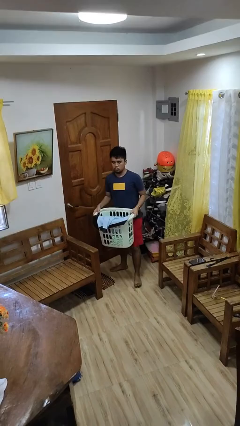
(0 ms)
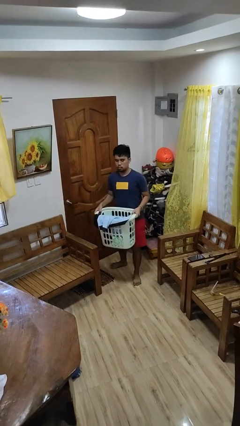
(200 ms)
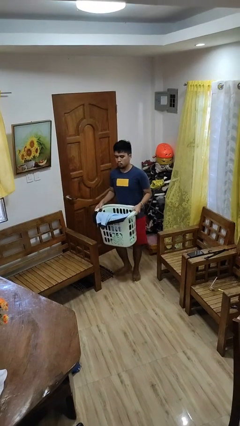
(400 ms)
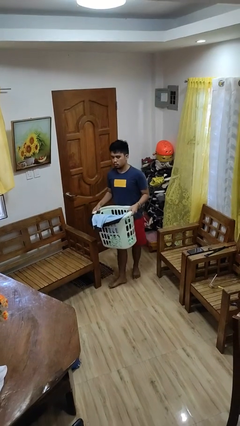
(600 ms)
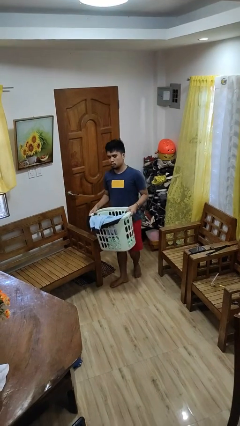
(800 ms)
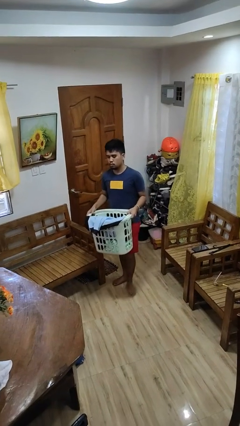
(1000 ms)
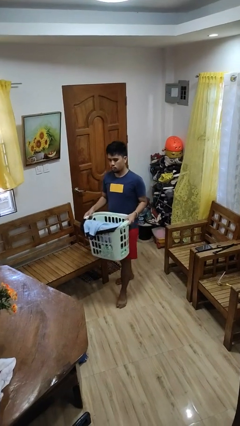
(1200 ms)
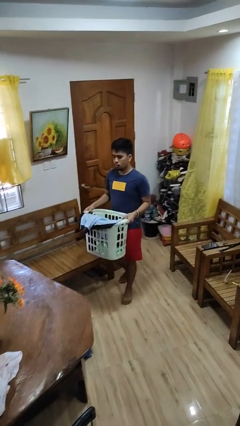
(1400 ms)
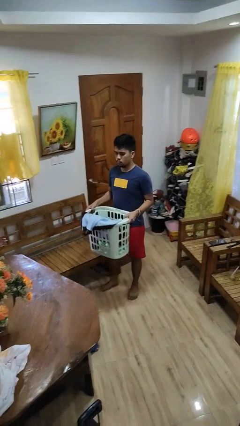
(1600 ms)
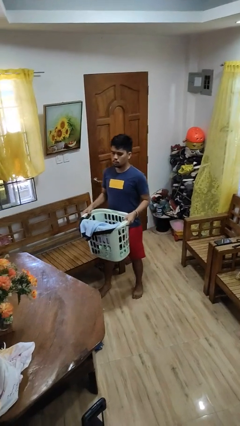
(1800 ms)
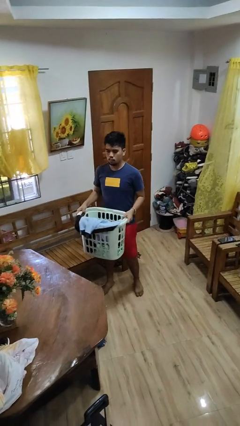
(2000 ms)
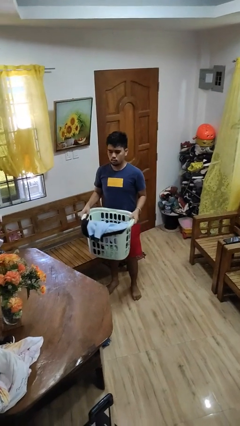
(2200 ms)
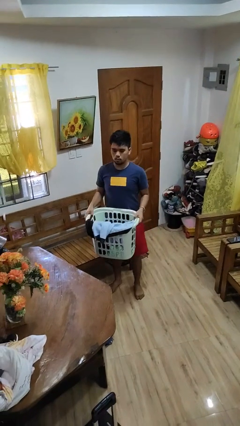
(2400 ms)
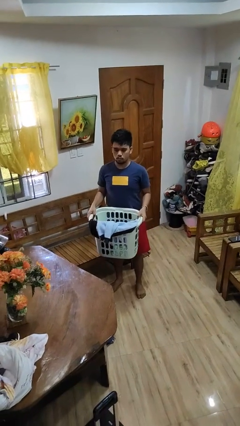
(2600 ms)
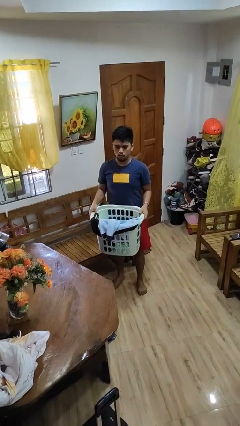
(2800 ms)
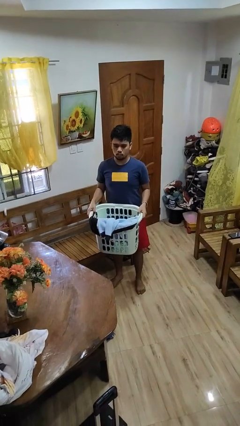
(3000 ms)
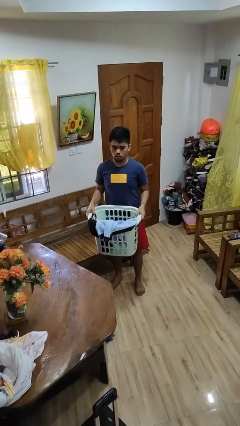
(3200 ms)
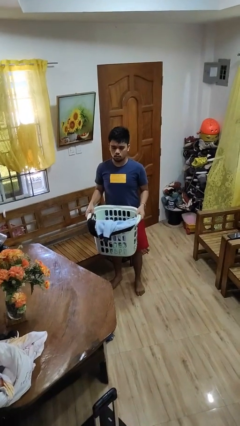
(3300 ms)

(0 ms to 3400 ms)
person carries laundry basket

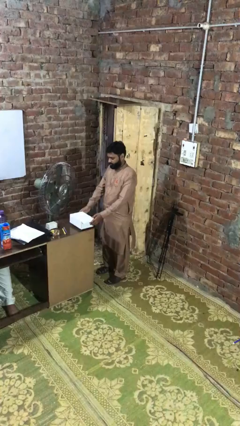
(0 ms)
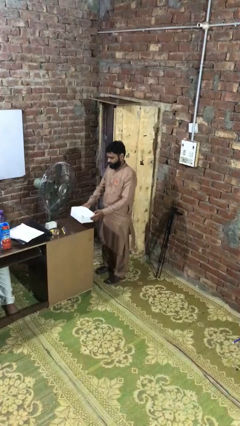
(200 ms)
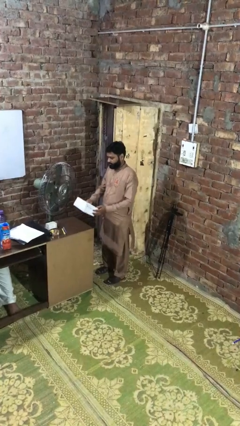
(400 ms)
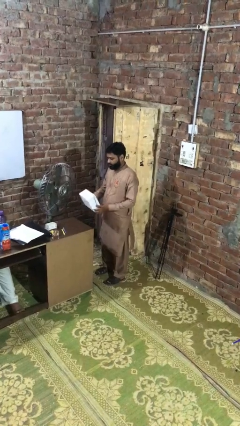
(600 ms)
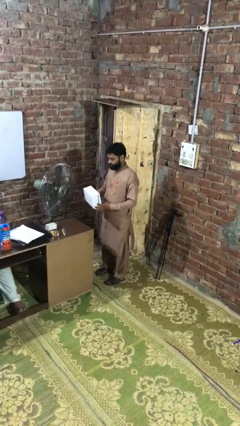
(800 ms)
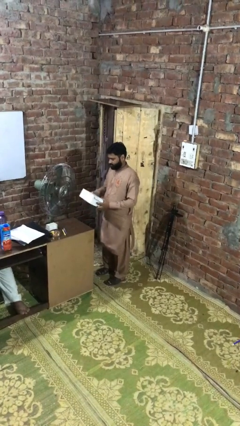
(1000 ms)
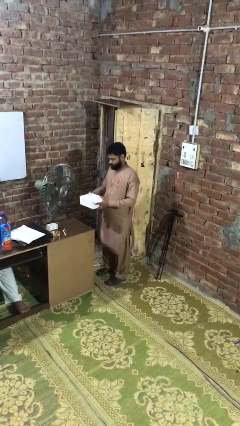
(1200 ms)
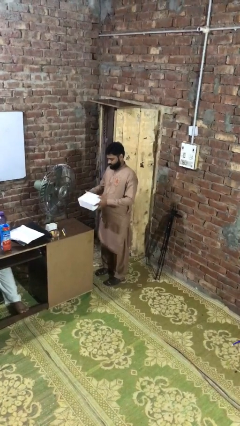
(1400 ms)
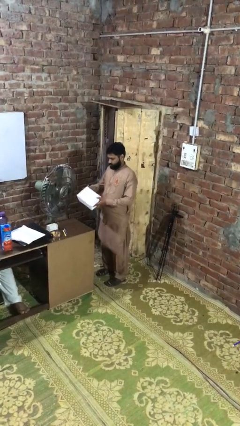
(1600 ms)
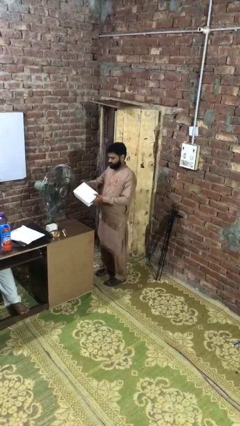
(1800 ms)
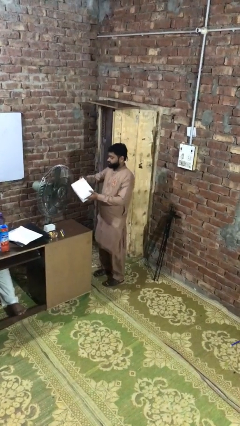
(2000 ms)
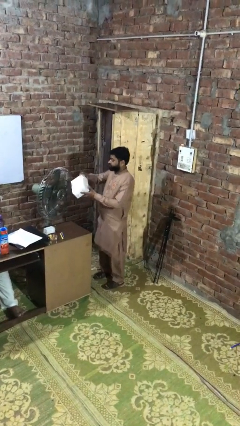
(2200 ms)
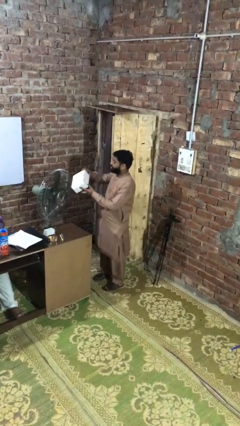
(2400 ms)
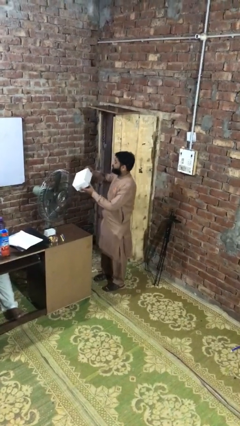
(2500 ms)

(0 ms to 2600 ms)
person picks up object from table

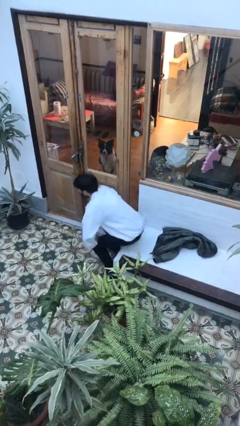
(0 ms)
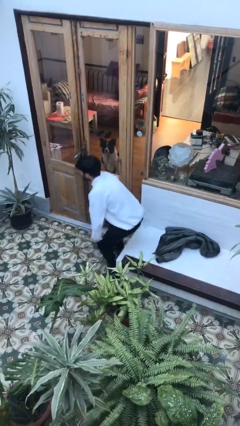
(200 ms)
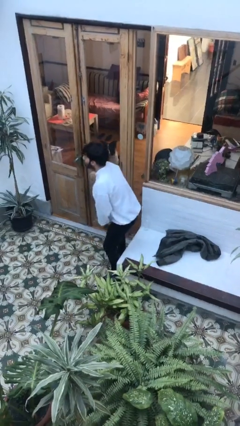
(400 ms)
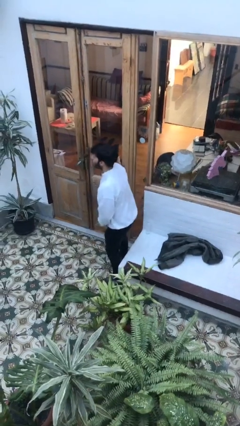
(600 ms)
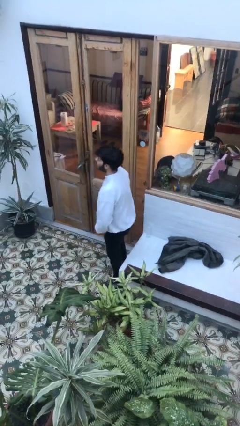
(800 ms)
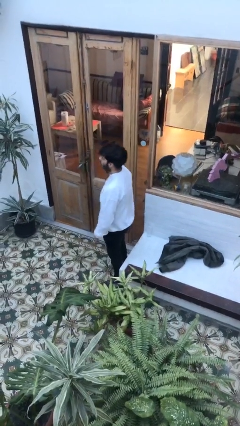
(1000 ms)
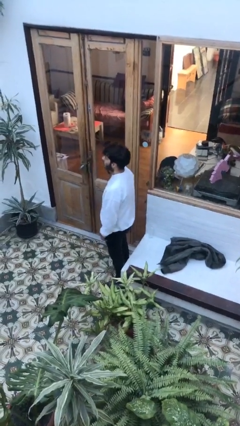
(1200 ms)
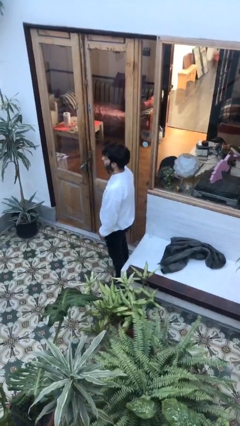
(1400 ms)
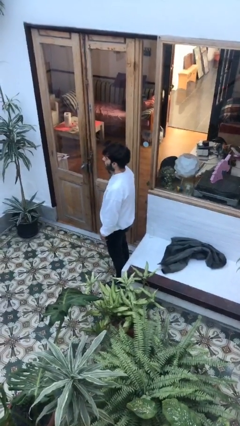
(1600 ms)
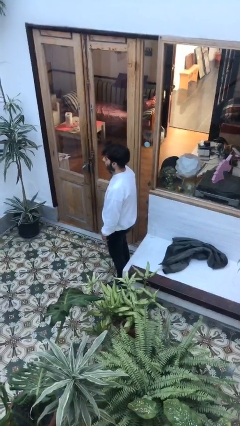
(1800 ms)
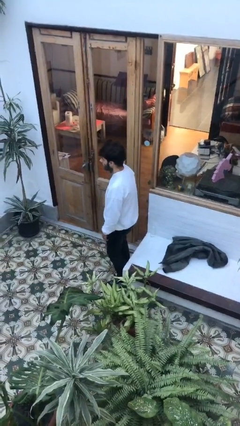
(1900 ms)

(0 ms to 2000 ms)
person stands up

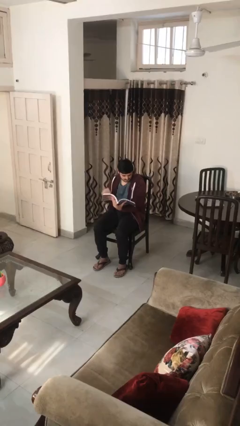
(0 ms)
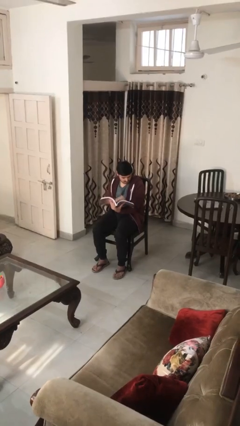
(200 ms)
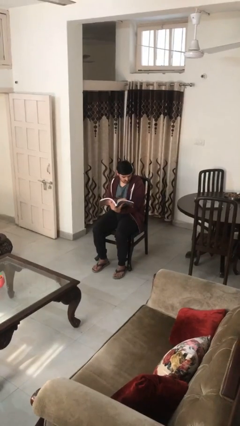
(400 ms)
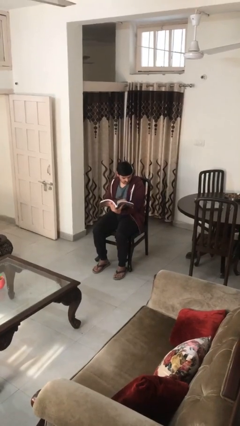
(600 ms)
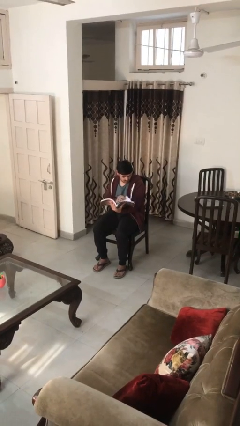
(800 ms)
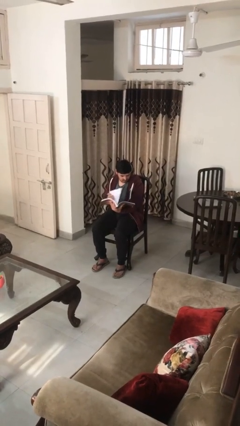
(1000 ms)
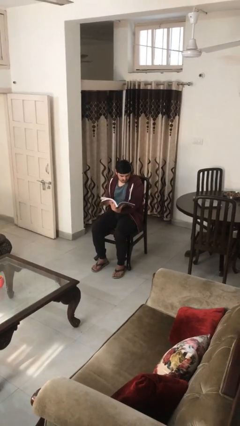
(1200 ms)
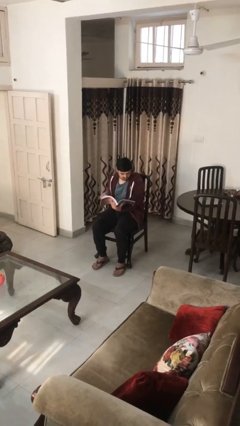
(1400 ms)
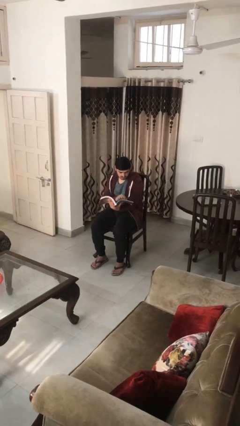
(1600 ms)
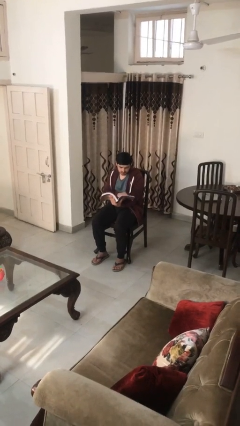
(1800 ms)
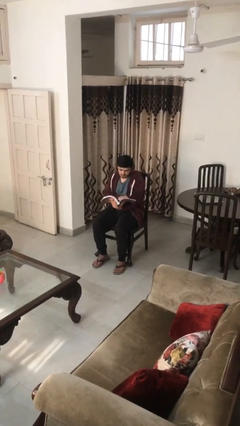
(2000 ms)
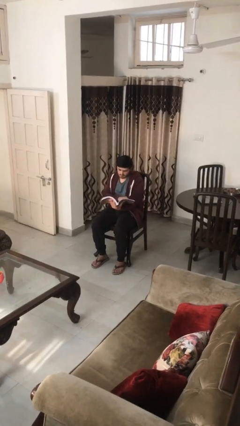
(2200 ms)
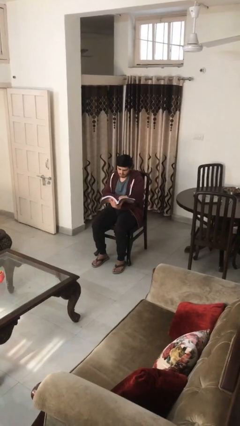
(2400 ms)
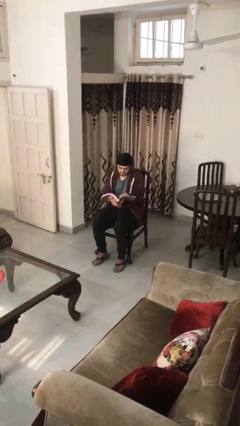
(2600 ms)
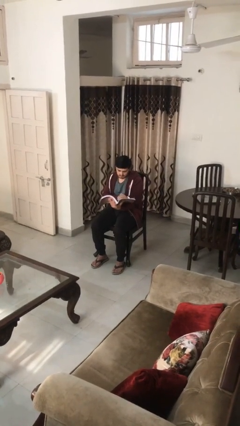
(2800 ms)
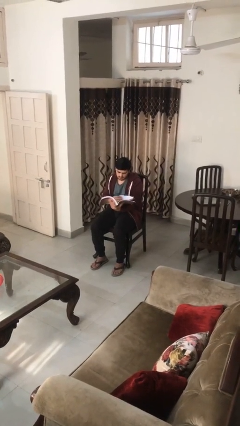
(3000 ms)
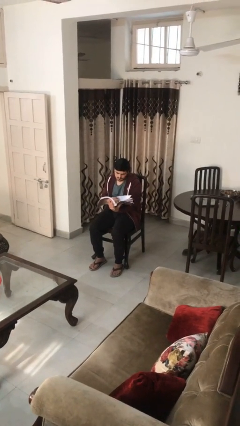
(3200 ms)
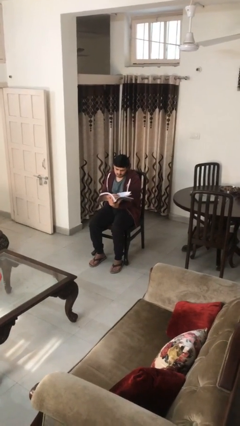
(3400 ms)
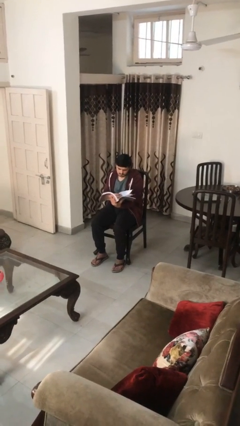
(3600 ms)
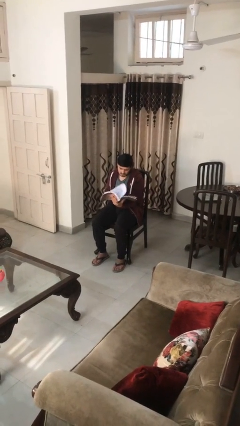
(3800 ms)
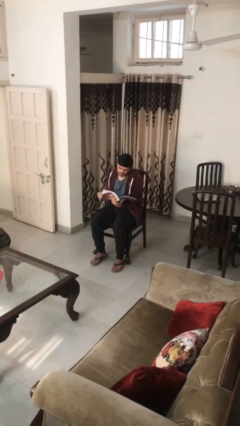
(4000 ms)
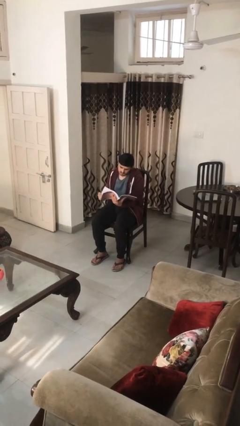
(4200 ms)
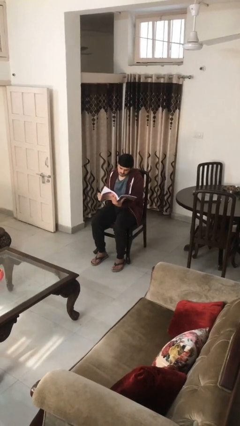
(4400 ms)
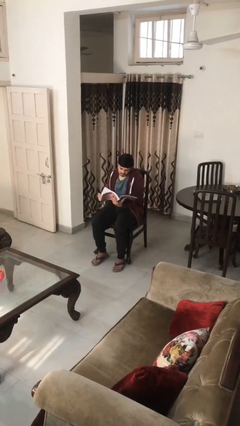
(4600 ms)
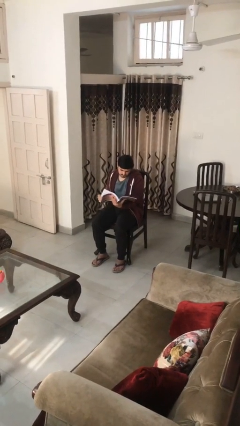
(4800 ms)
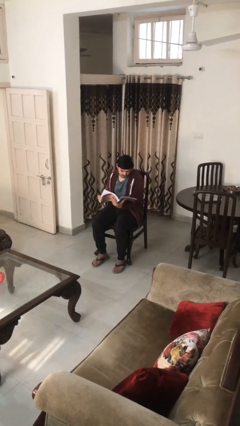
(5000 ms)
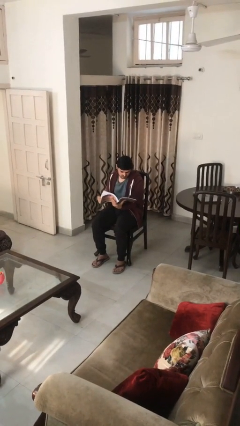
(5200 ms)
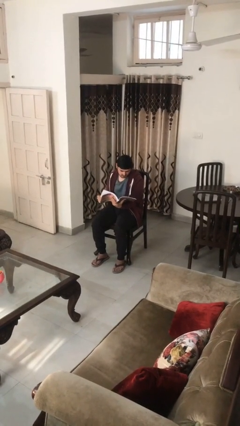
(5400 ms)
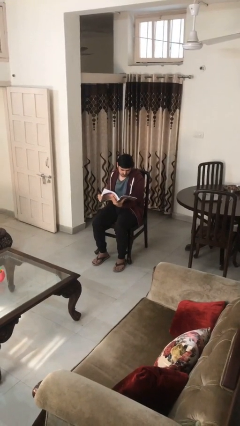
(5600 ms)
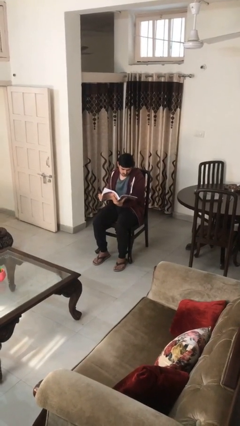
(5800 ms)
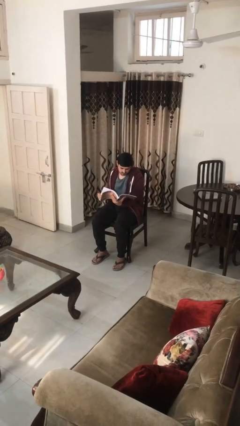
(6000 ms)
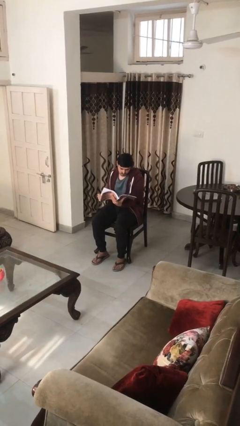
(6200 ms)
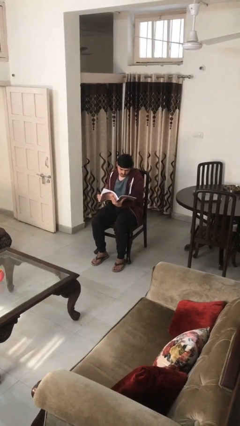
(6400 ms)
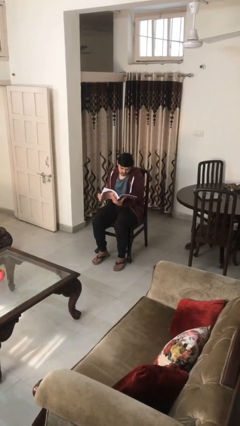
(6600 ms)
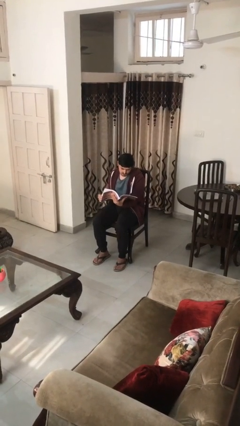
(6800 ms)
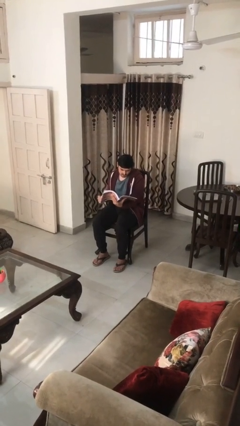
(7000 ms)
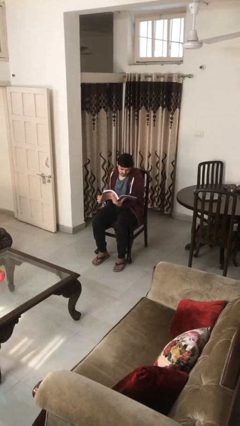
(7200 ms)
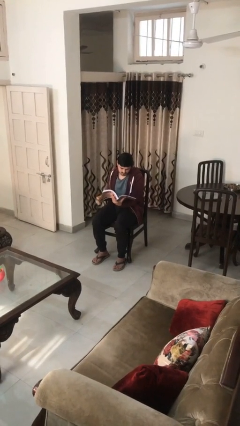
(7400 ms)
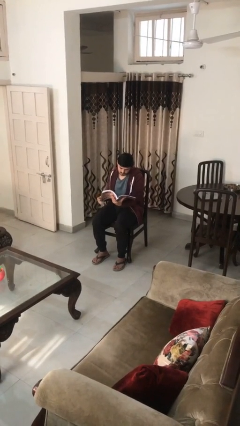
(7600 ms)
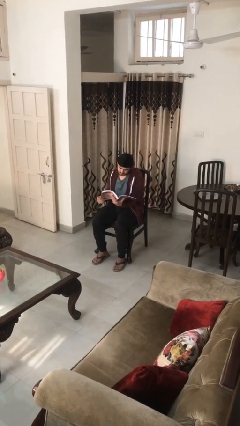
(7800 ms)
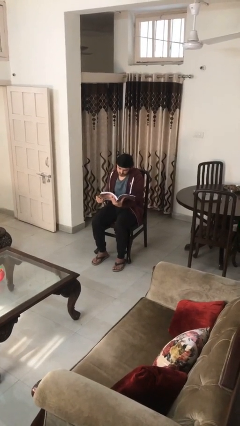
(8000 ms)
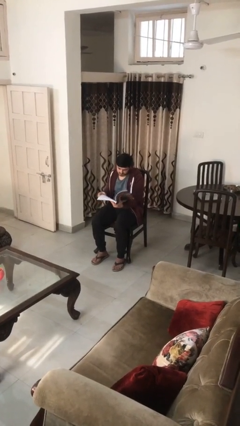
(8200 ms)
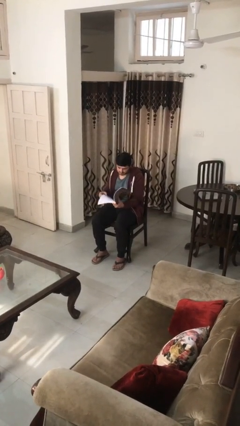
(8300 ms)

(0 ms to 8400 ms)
person reads document

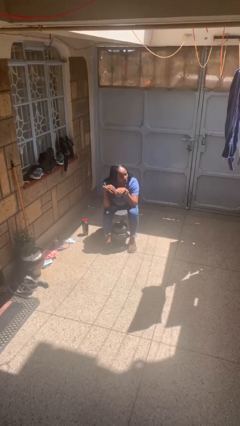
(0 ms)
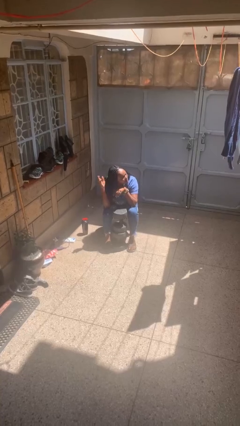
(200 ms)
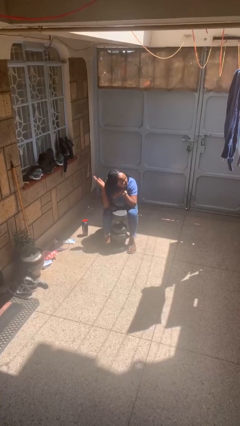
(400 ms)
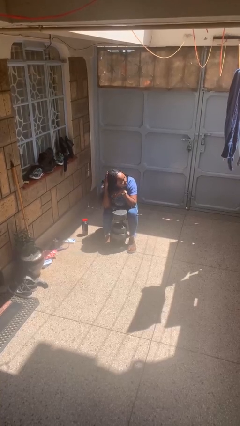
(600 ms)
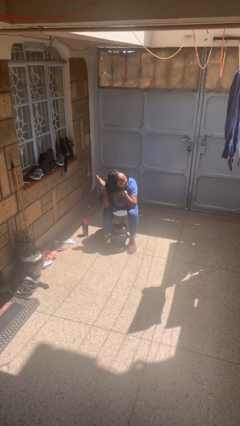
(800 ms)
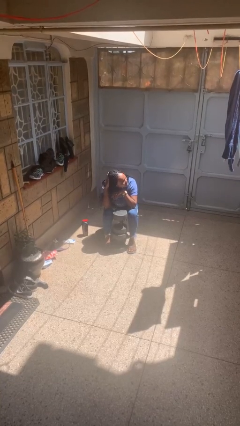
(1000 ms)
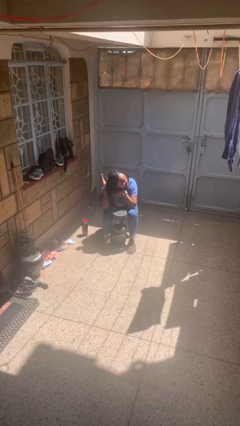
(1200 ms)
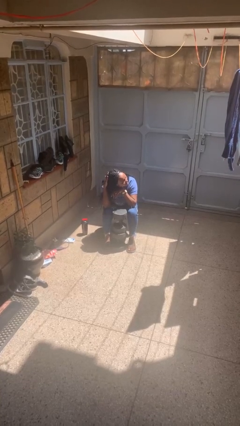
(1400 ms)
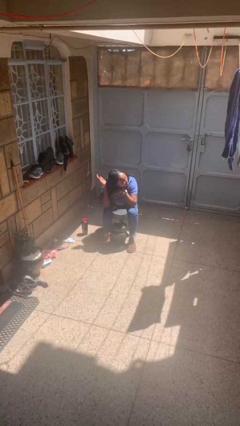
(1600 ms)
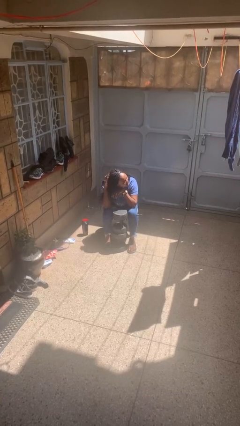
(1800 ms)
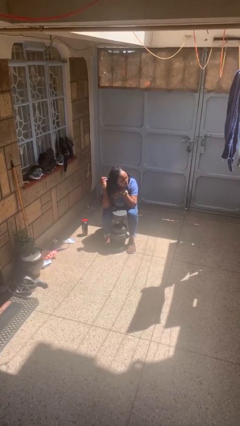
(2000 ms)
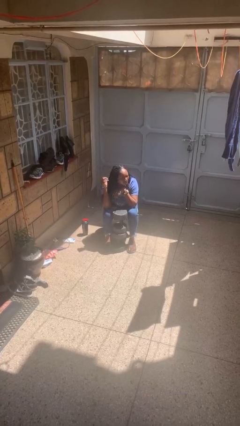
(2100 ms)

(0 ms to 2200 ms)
person pats head
